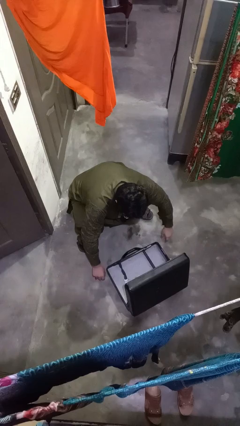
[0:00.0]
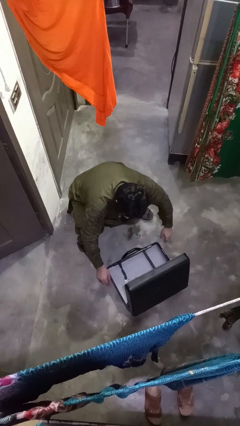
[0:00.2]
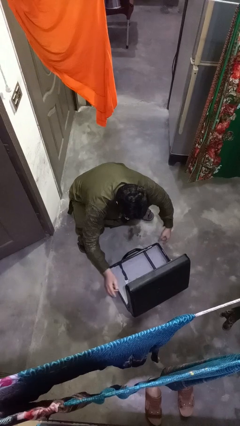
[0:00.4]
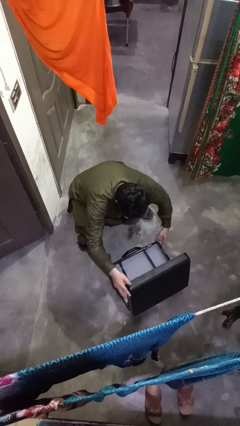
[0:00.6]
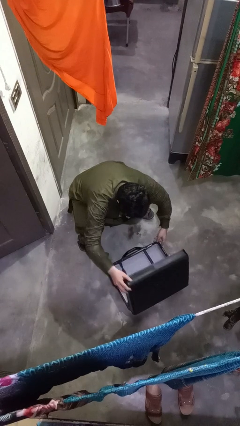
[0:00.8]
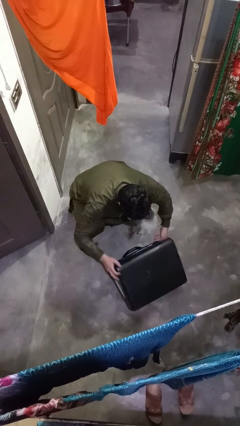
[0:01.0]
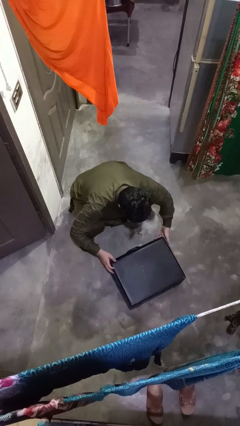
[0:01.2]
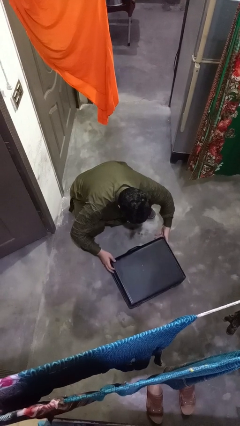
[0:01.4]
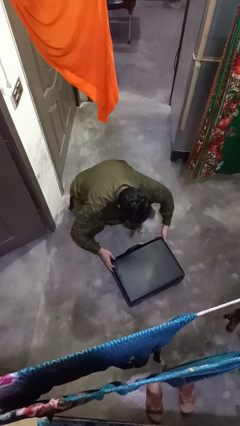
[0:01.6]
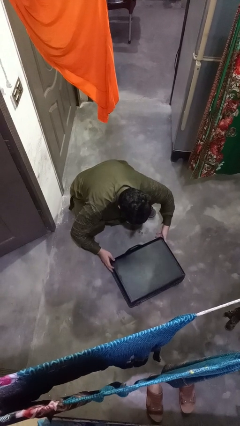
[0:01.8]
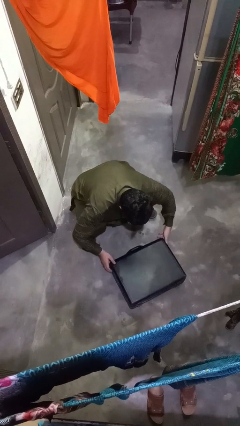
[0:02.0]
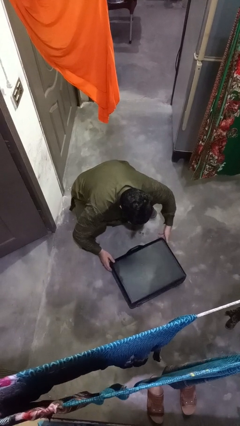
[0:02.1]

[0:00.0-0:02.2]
person closes suitcase

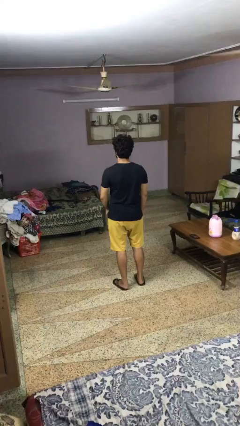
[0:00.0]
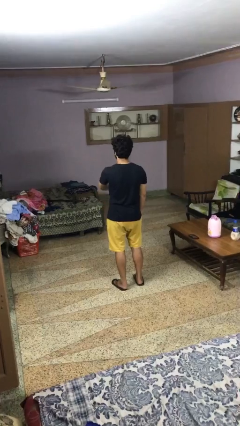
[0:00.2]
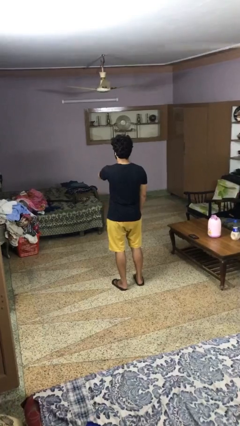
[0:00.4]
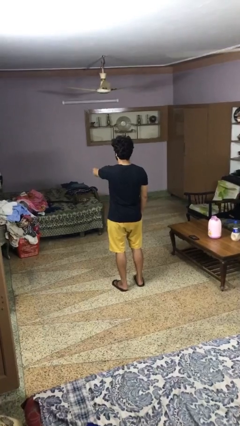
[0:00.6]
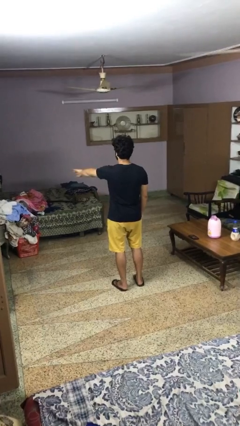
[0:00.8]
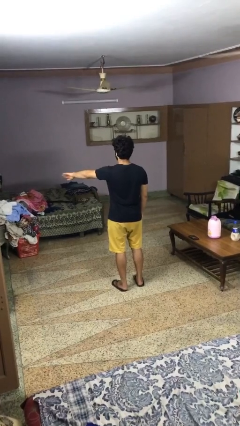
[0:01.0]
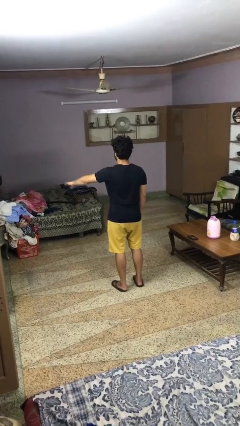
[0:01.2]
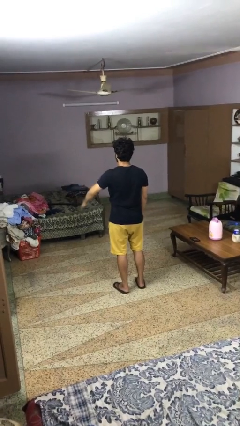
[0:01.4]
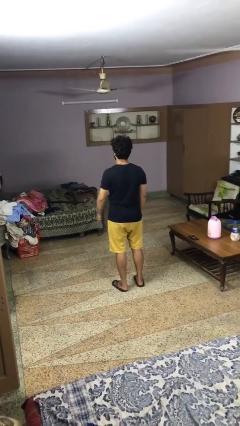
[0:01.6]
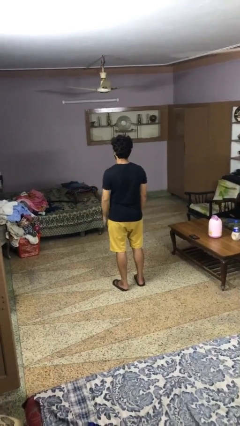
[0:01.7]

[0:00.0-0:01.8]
person gestures swipe left

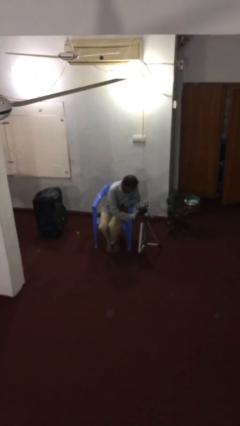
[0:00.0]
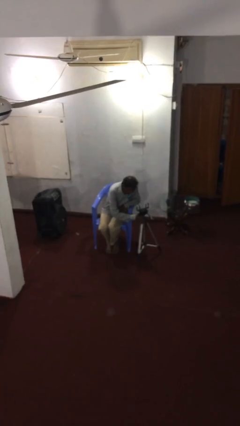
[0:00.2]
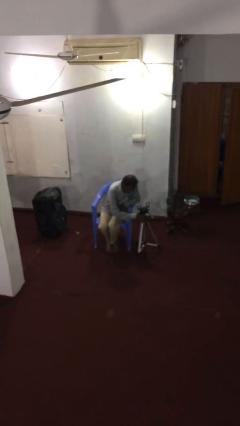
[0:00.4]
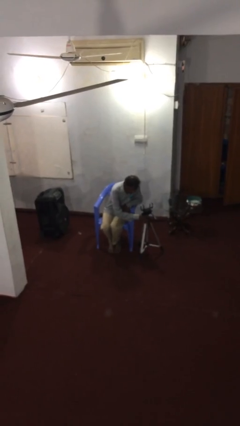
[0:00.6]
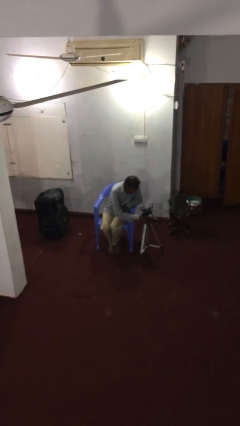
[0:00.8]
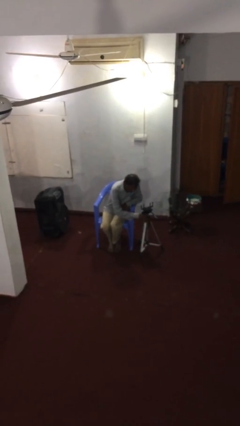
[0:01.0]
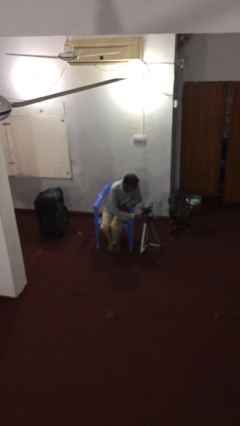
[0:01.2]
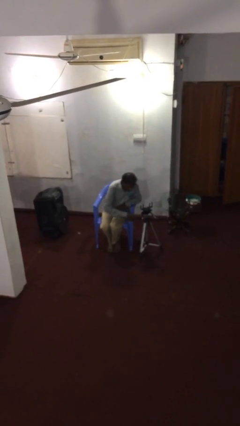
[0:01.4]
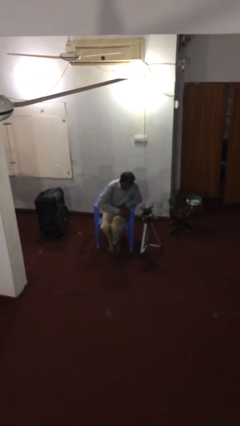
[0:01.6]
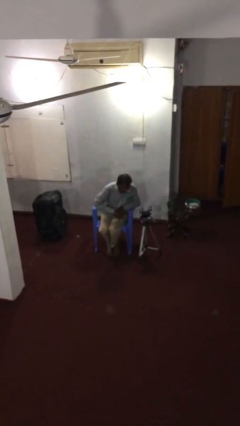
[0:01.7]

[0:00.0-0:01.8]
person puts down object on floor

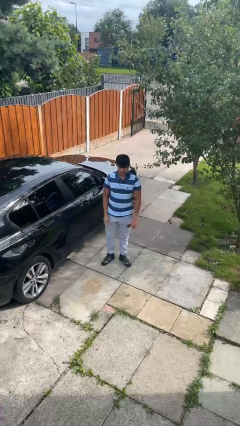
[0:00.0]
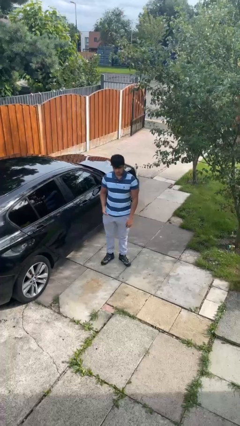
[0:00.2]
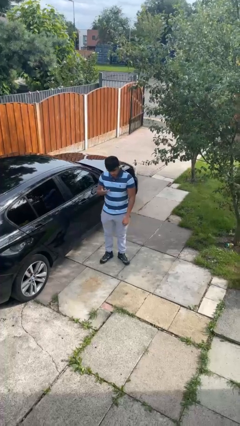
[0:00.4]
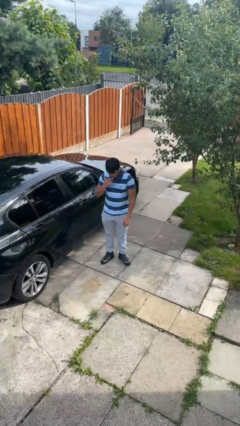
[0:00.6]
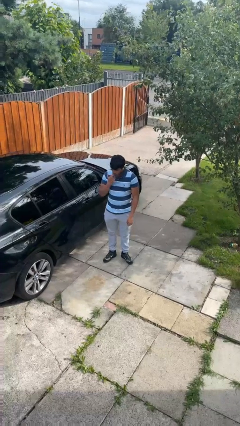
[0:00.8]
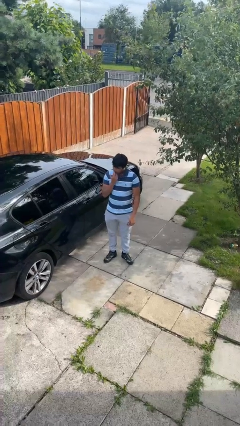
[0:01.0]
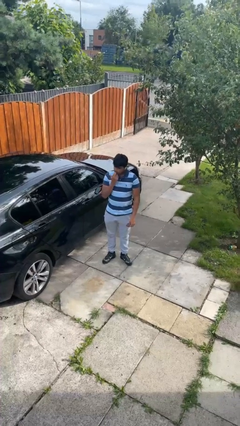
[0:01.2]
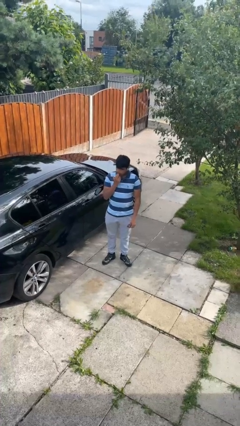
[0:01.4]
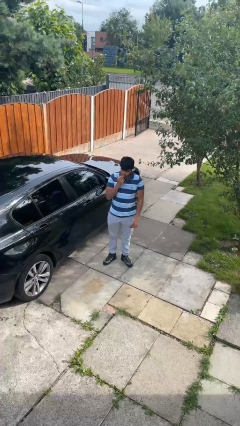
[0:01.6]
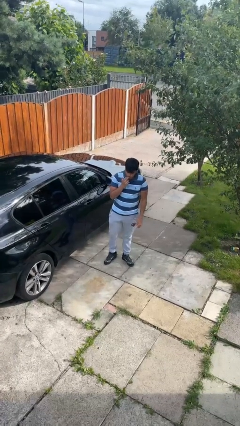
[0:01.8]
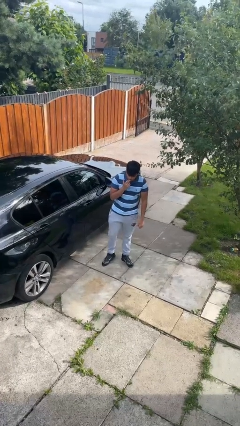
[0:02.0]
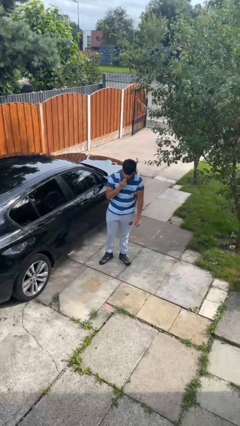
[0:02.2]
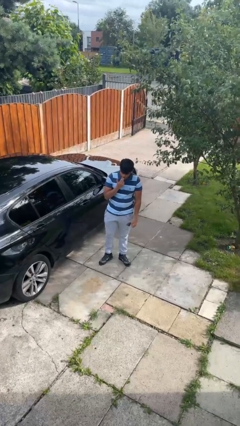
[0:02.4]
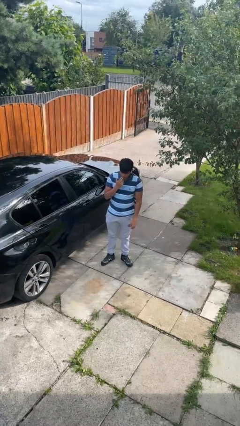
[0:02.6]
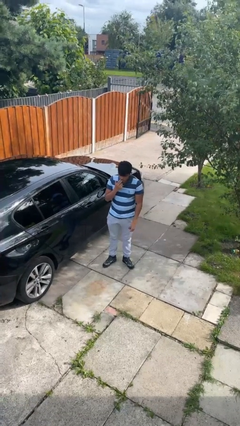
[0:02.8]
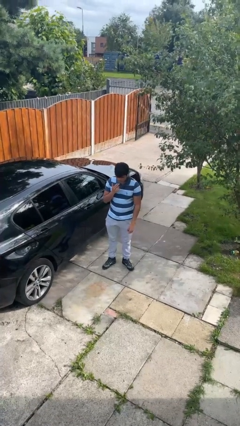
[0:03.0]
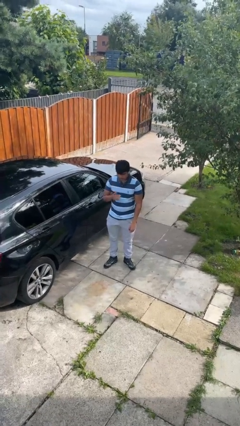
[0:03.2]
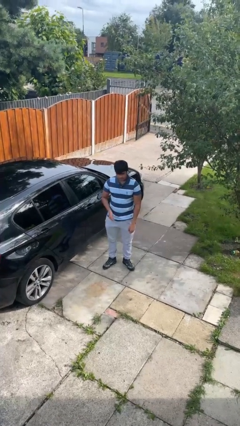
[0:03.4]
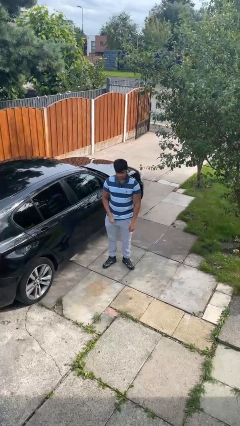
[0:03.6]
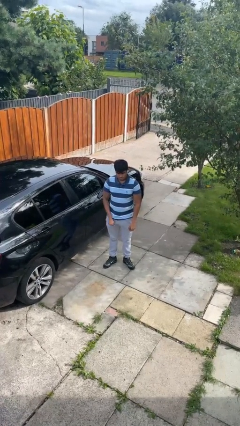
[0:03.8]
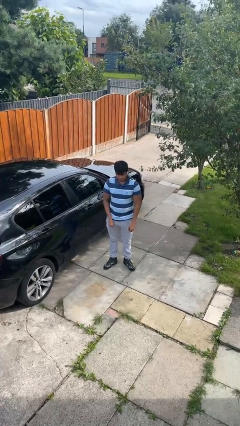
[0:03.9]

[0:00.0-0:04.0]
person licks fingers

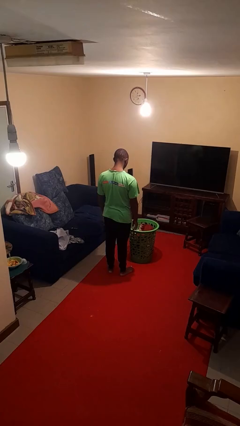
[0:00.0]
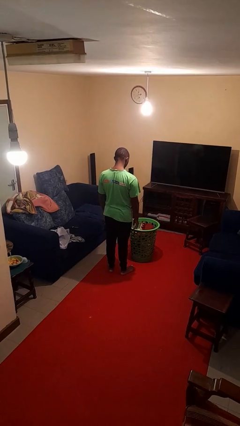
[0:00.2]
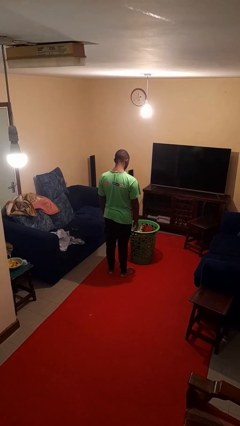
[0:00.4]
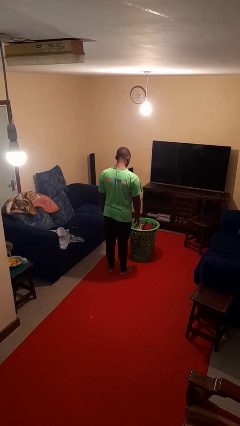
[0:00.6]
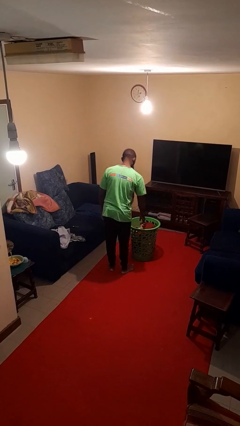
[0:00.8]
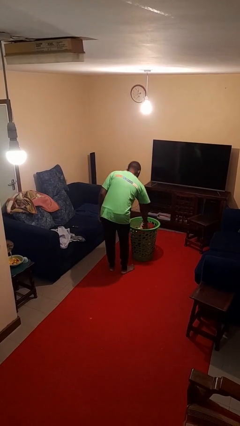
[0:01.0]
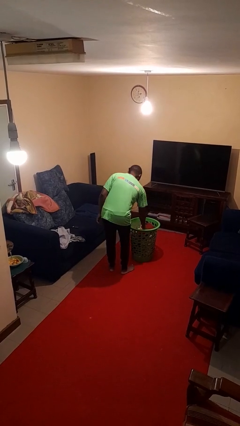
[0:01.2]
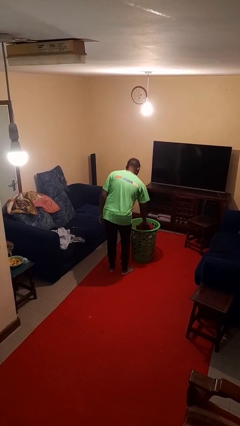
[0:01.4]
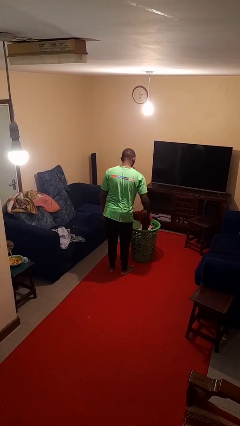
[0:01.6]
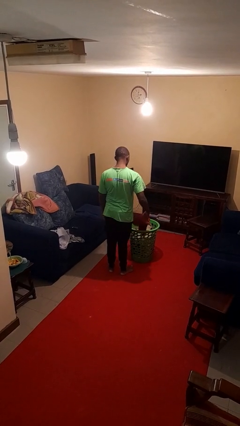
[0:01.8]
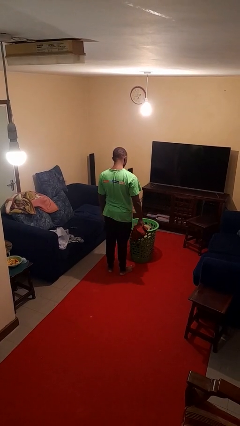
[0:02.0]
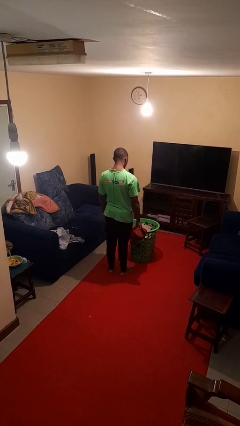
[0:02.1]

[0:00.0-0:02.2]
person takes object from basket

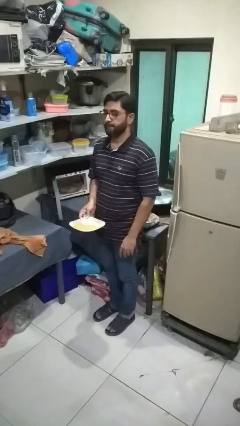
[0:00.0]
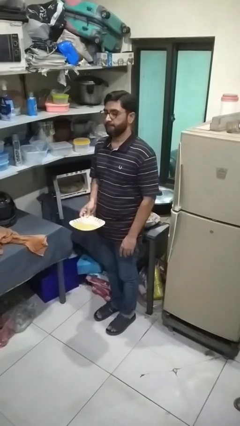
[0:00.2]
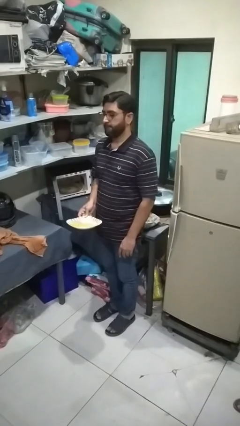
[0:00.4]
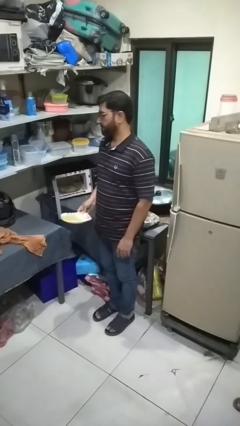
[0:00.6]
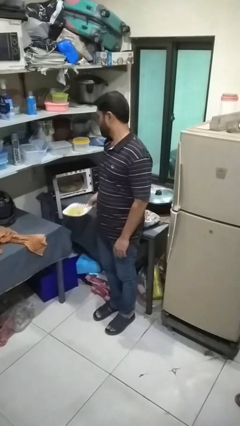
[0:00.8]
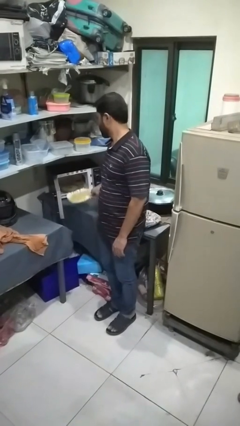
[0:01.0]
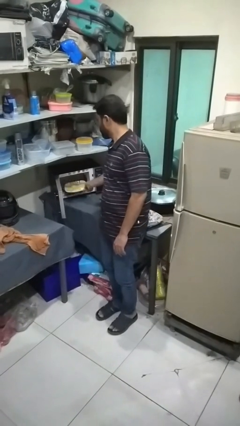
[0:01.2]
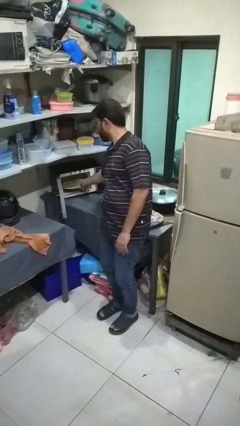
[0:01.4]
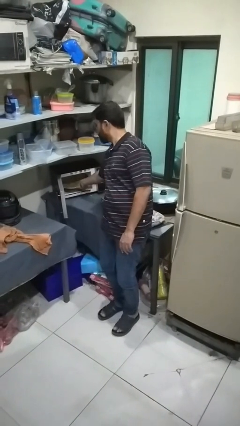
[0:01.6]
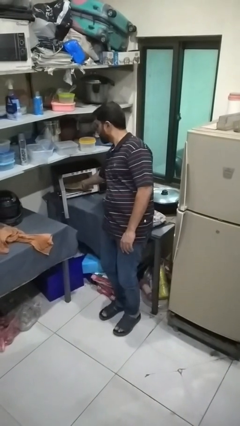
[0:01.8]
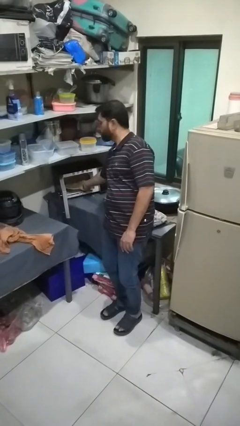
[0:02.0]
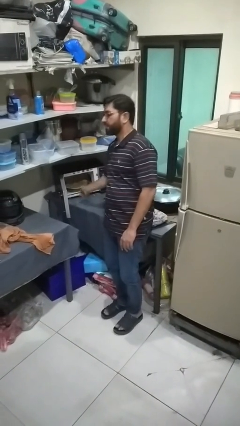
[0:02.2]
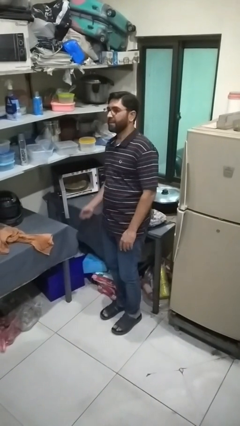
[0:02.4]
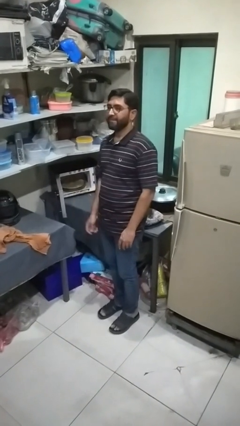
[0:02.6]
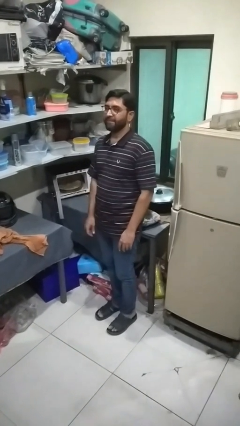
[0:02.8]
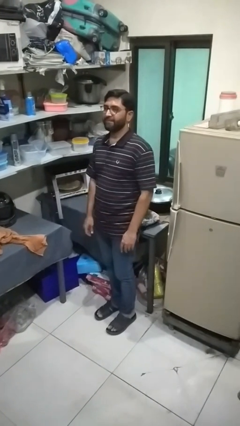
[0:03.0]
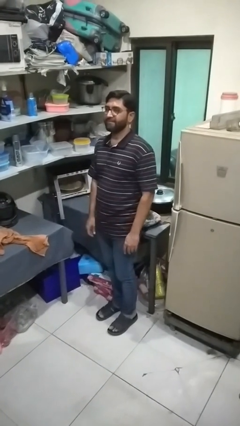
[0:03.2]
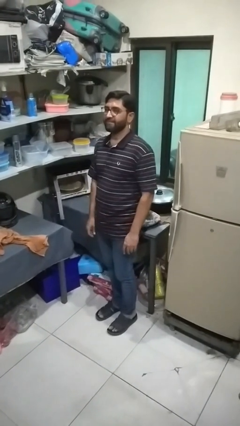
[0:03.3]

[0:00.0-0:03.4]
person puts object into microwave

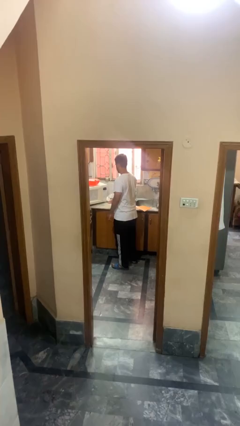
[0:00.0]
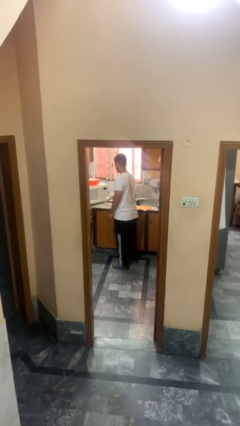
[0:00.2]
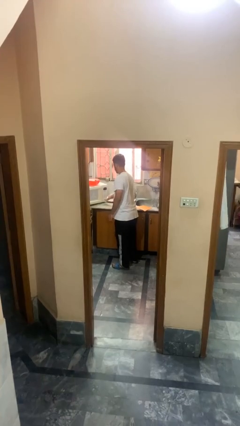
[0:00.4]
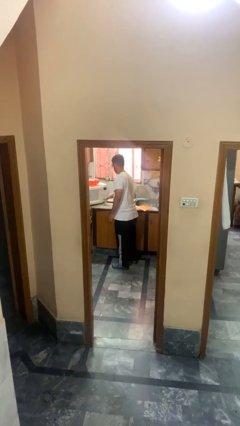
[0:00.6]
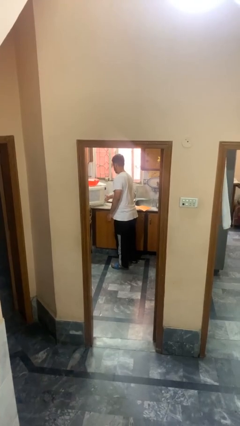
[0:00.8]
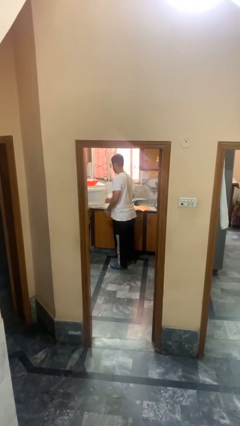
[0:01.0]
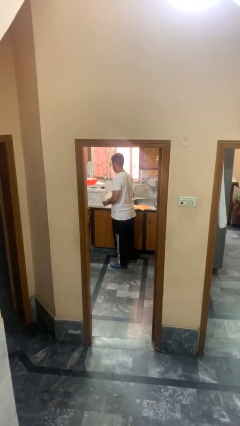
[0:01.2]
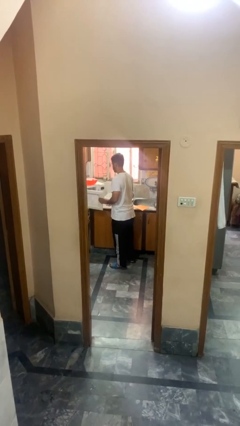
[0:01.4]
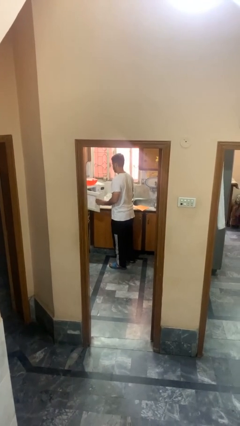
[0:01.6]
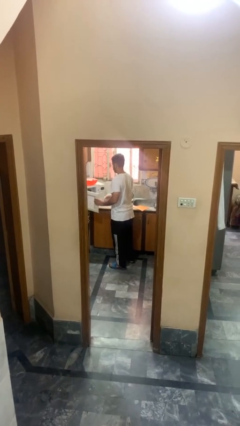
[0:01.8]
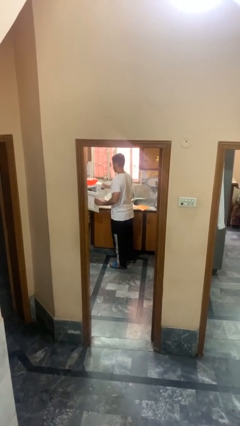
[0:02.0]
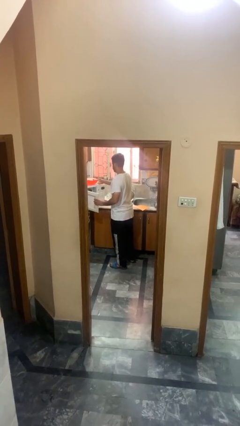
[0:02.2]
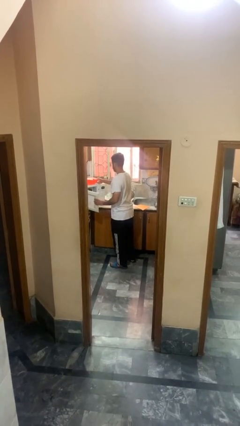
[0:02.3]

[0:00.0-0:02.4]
person opens microwave
